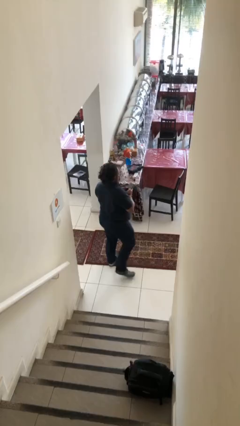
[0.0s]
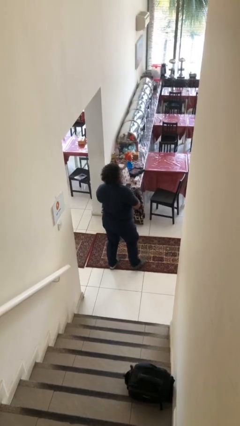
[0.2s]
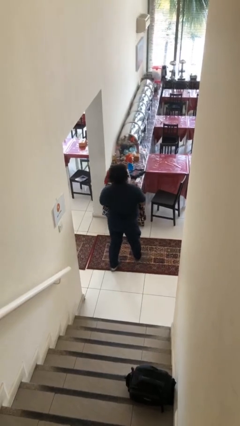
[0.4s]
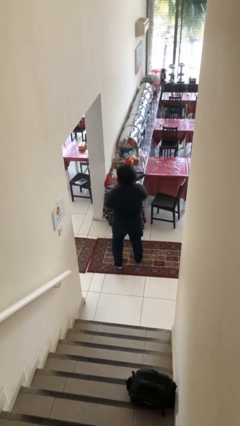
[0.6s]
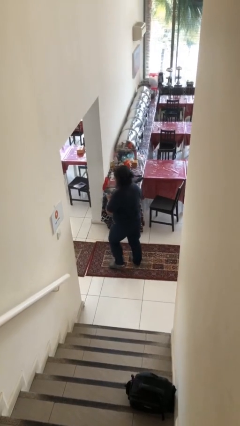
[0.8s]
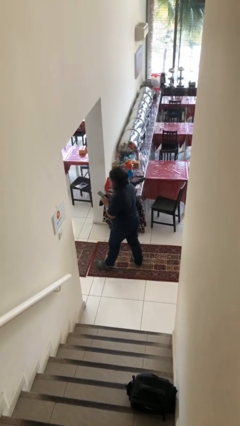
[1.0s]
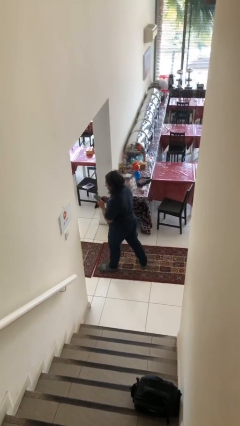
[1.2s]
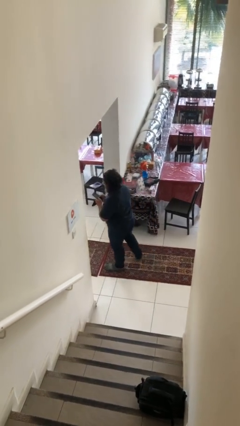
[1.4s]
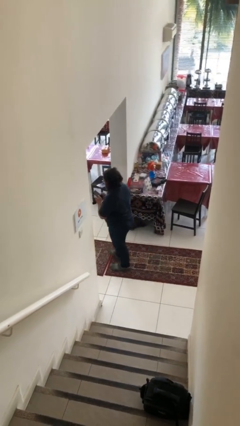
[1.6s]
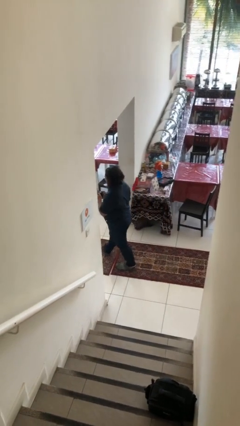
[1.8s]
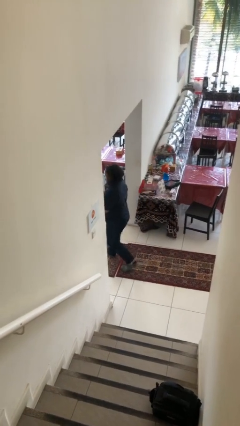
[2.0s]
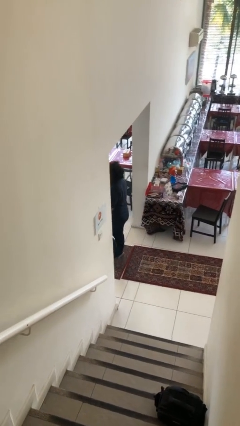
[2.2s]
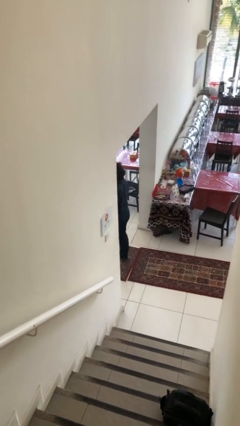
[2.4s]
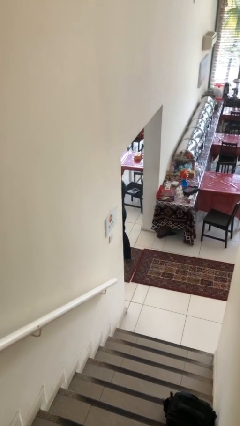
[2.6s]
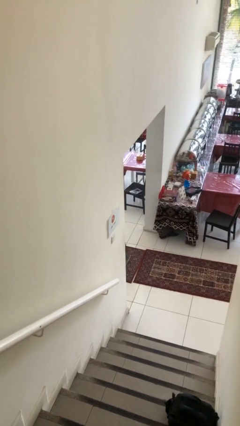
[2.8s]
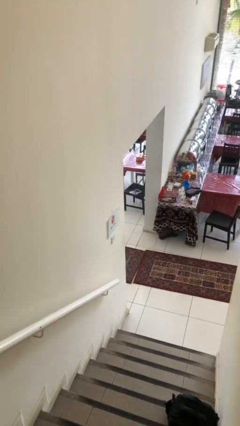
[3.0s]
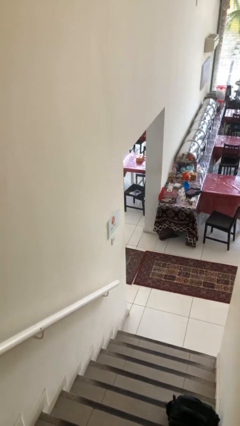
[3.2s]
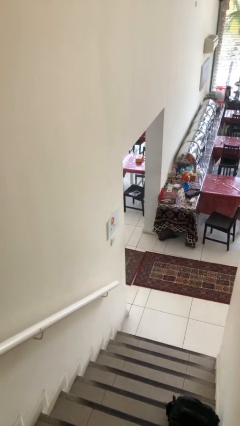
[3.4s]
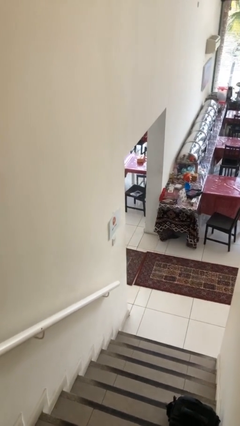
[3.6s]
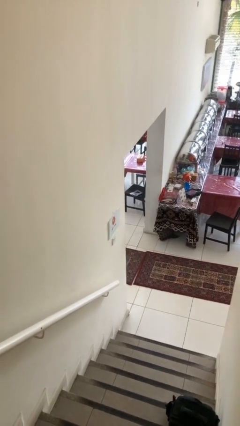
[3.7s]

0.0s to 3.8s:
person exits scene through structure

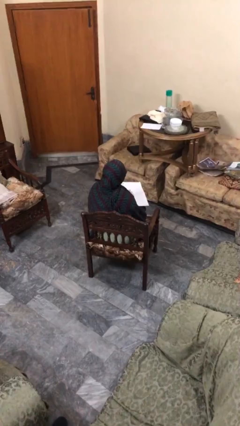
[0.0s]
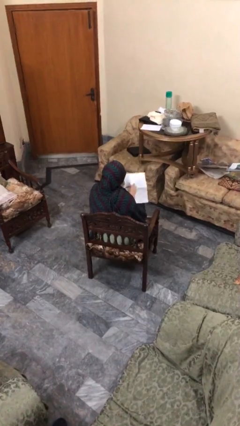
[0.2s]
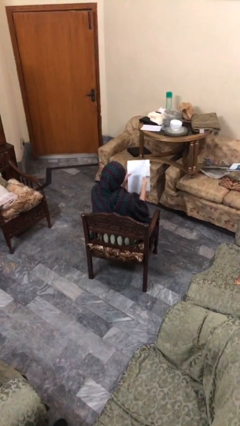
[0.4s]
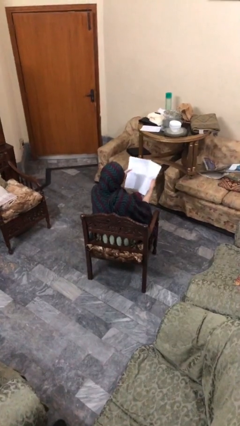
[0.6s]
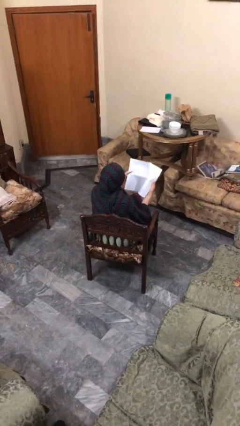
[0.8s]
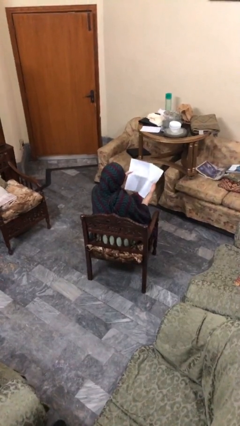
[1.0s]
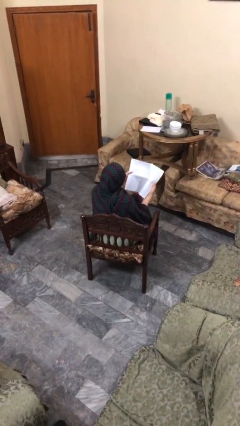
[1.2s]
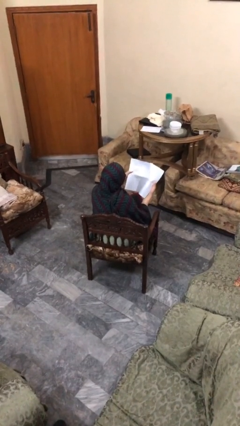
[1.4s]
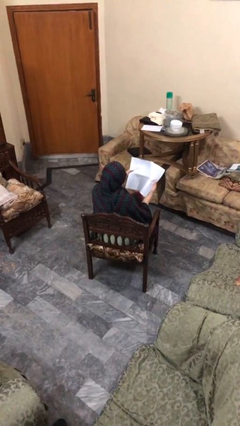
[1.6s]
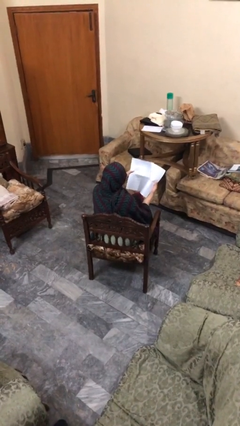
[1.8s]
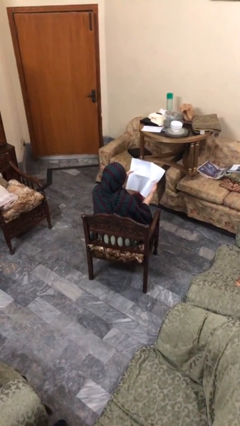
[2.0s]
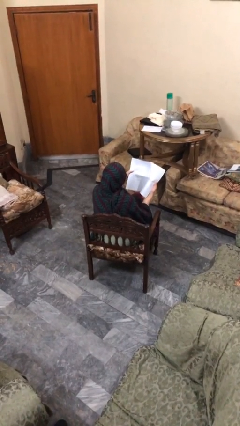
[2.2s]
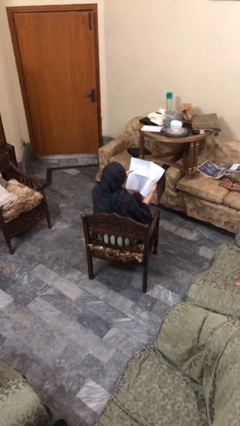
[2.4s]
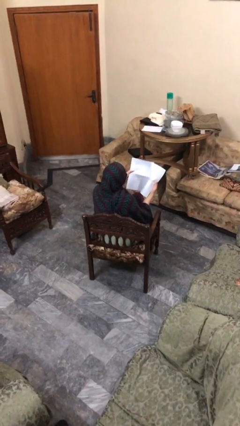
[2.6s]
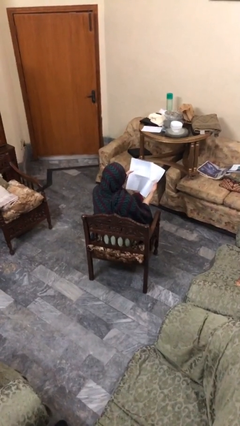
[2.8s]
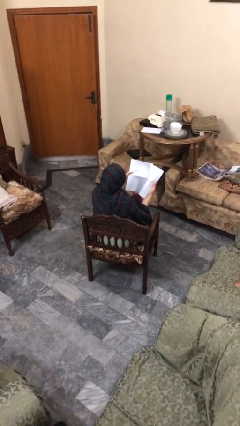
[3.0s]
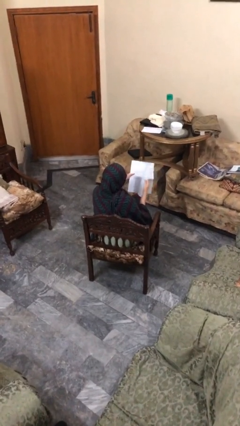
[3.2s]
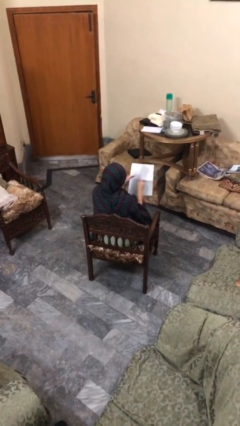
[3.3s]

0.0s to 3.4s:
person reads magazine

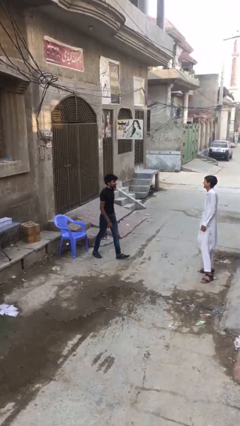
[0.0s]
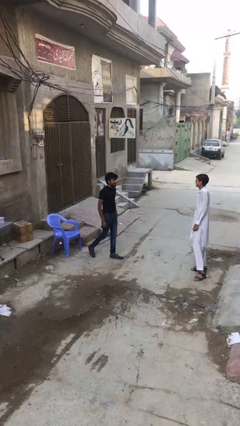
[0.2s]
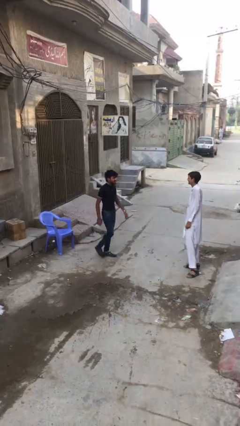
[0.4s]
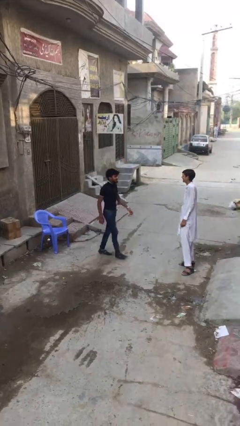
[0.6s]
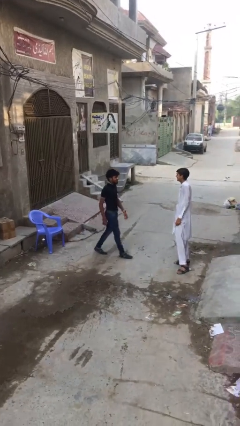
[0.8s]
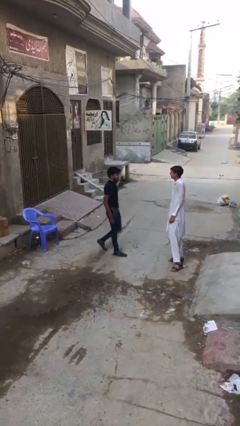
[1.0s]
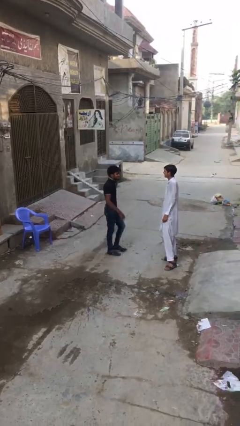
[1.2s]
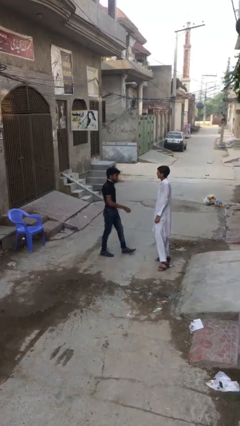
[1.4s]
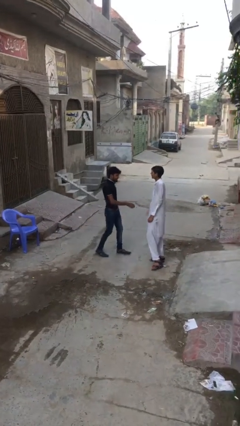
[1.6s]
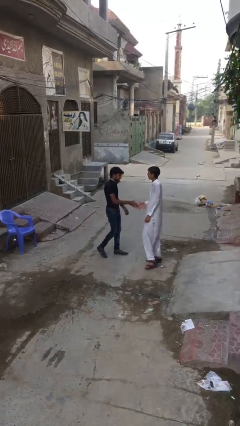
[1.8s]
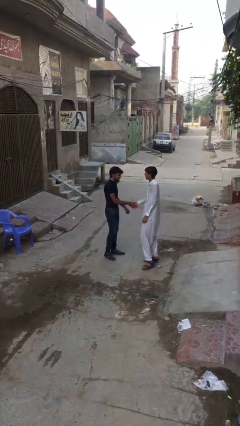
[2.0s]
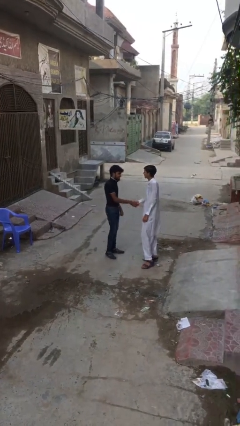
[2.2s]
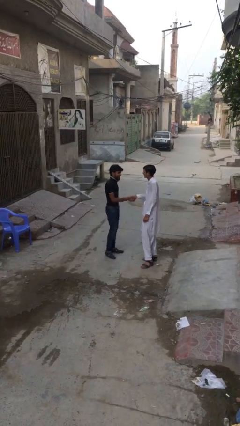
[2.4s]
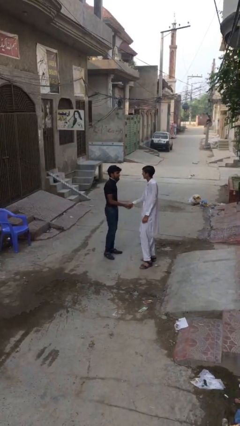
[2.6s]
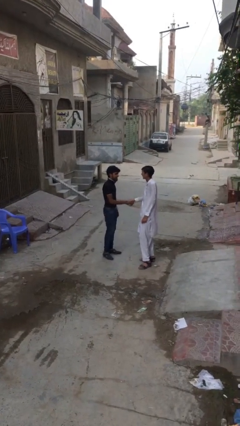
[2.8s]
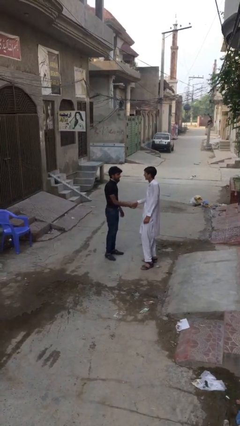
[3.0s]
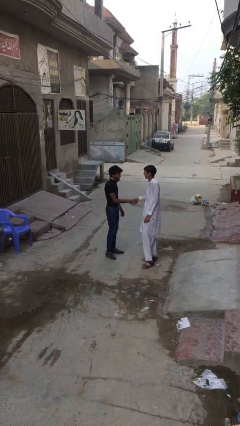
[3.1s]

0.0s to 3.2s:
person shakes hand

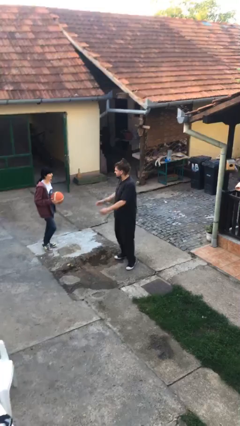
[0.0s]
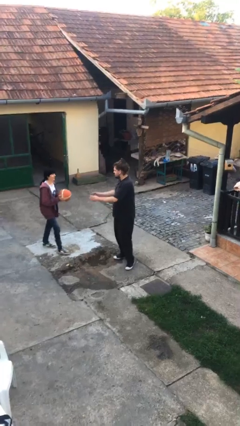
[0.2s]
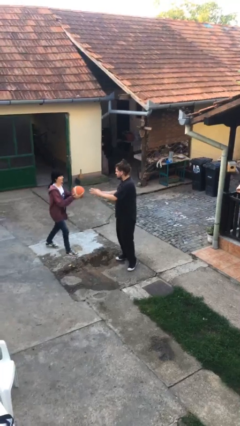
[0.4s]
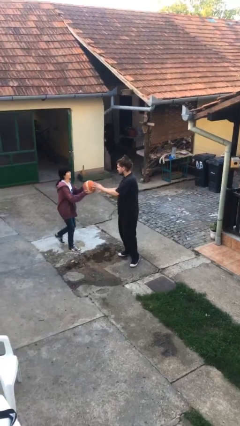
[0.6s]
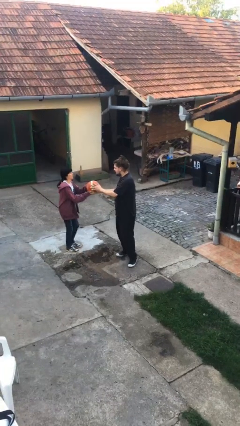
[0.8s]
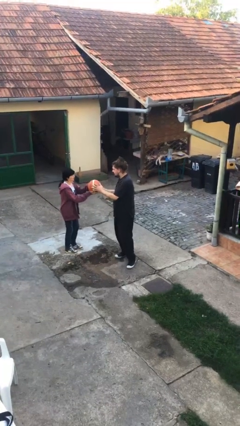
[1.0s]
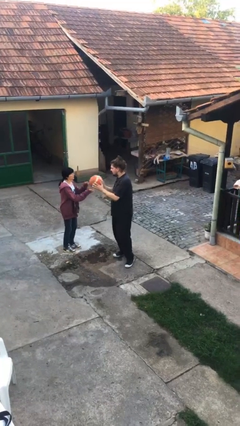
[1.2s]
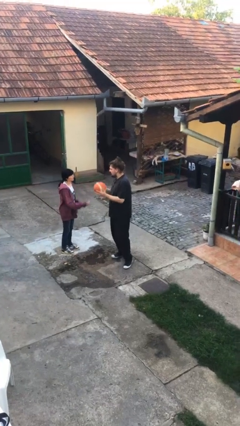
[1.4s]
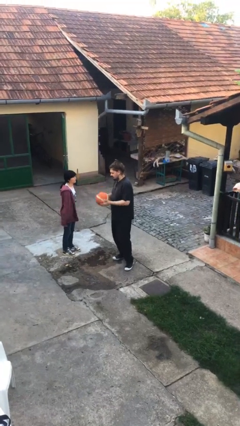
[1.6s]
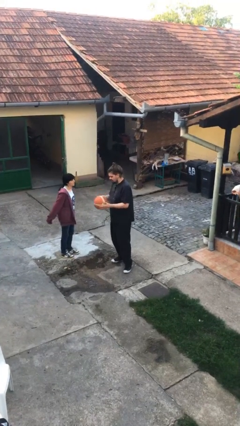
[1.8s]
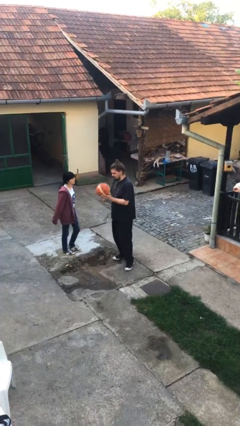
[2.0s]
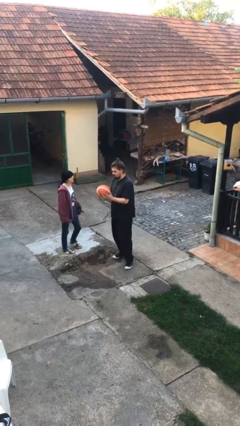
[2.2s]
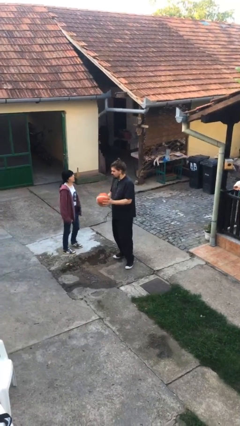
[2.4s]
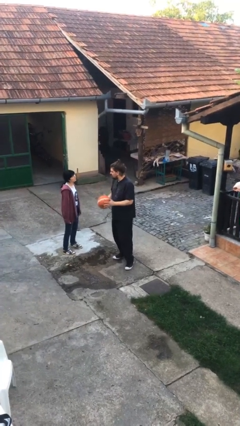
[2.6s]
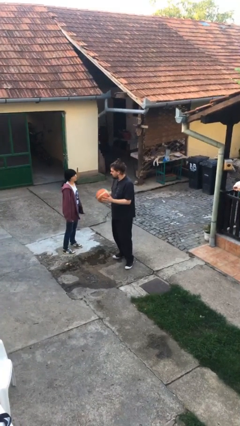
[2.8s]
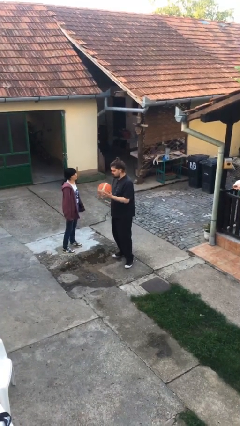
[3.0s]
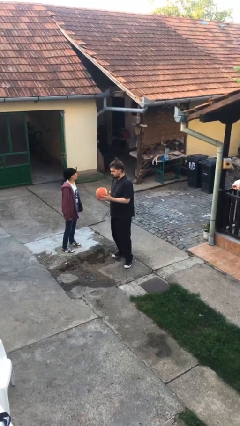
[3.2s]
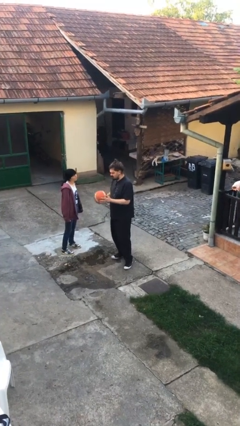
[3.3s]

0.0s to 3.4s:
person transfers object to person

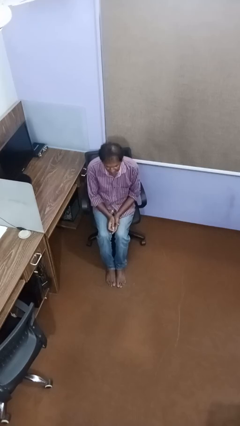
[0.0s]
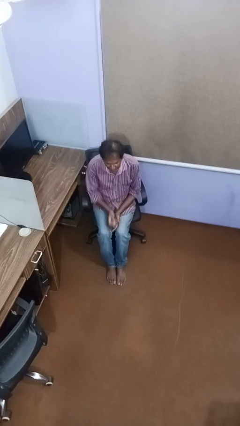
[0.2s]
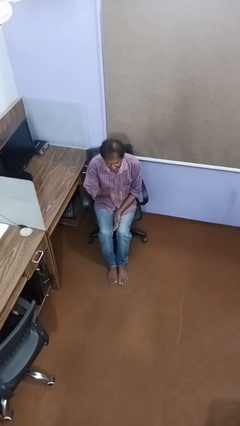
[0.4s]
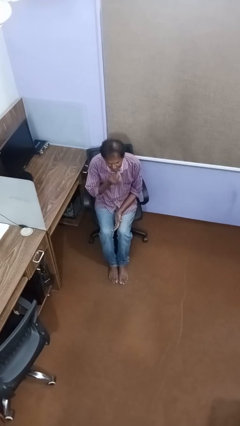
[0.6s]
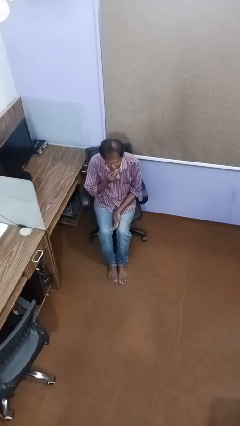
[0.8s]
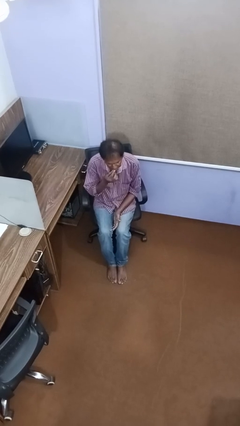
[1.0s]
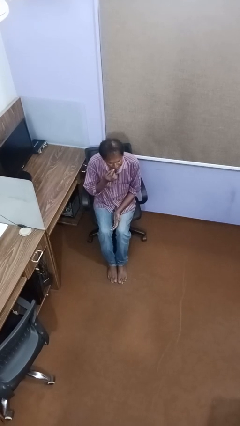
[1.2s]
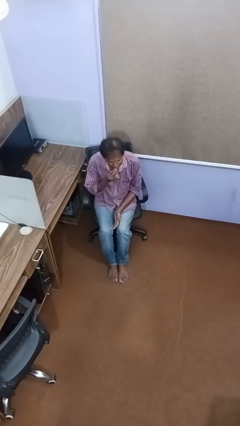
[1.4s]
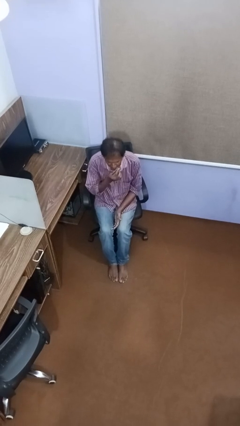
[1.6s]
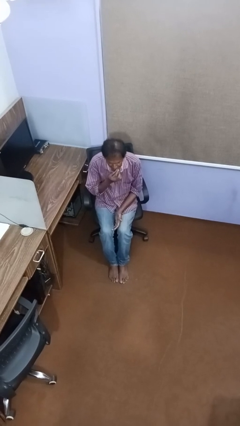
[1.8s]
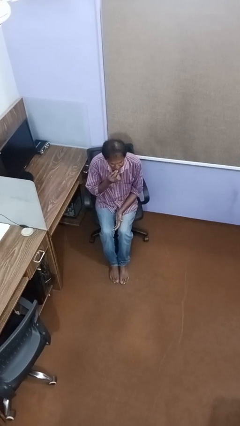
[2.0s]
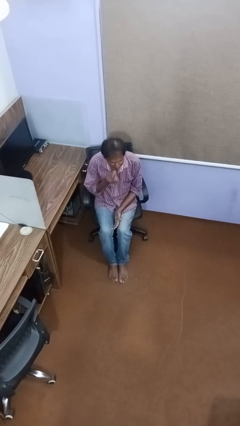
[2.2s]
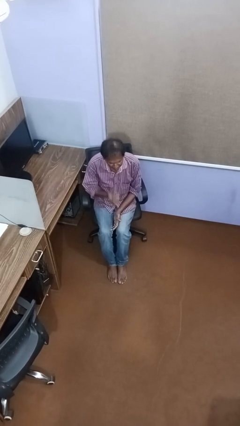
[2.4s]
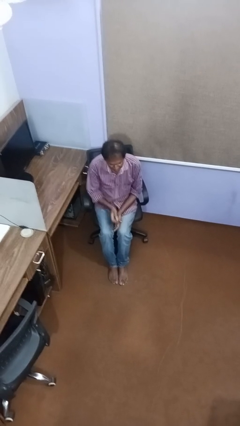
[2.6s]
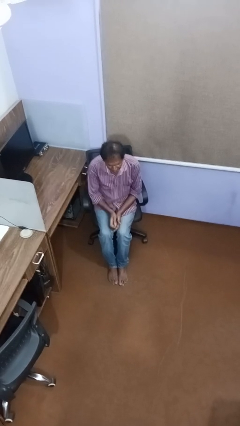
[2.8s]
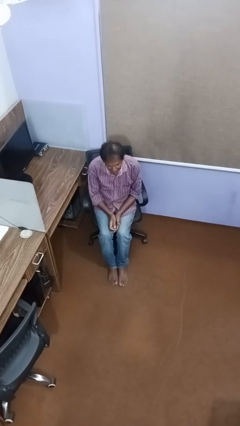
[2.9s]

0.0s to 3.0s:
person applies lip makeup

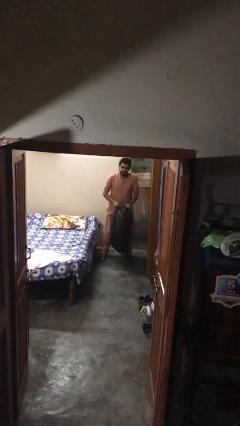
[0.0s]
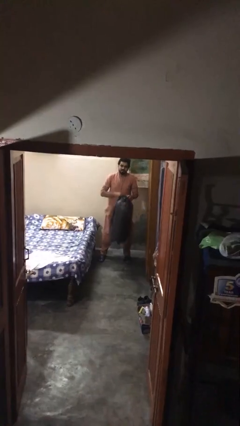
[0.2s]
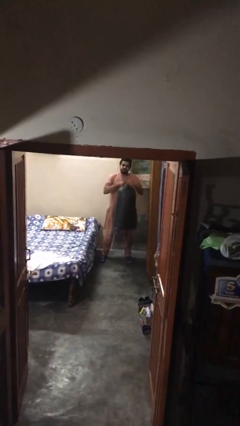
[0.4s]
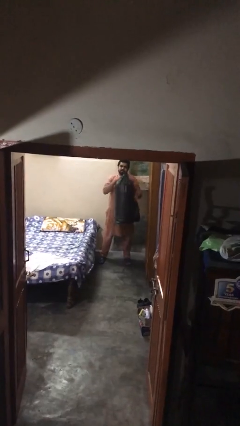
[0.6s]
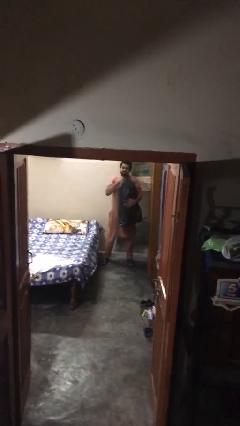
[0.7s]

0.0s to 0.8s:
person picks up object from floor

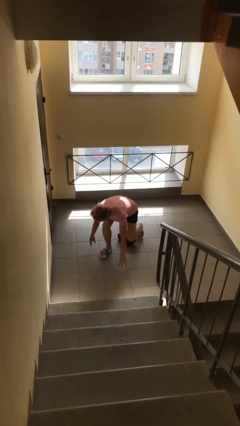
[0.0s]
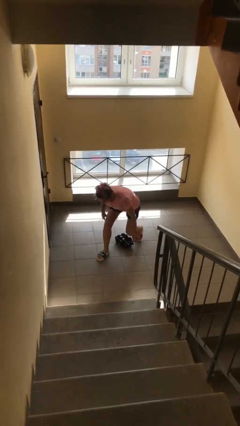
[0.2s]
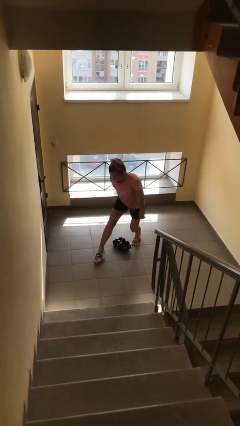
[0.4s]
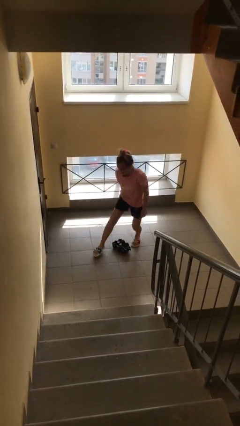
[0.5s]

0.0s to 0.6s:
person stands up from floor
